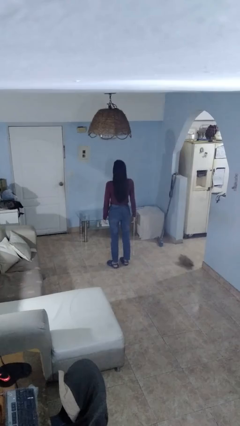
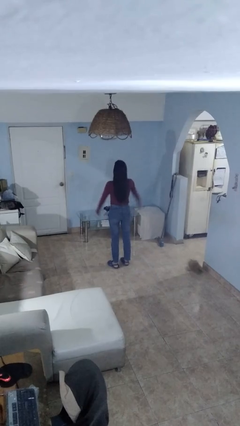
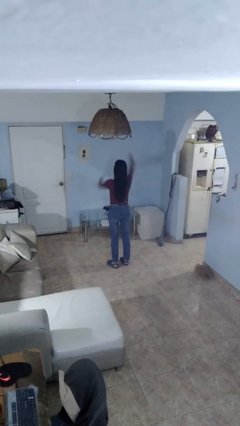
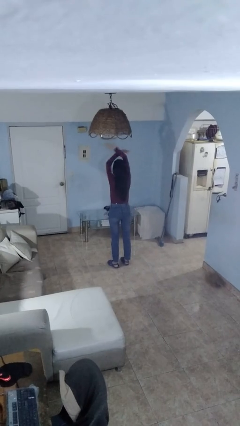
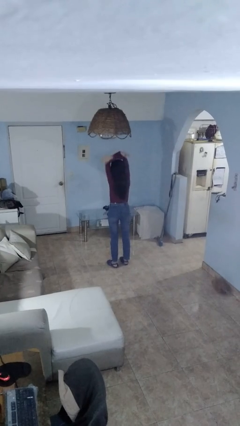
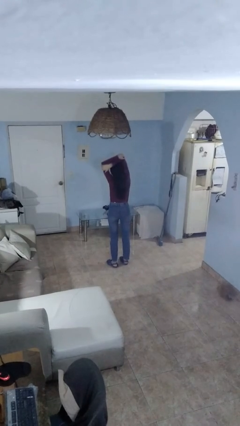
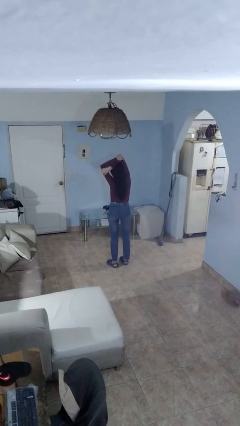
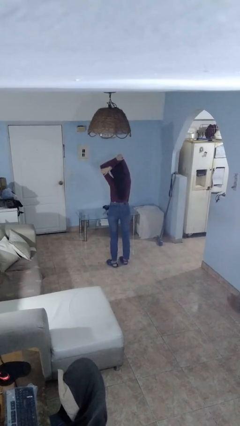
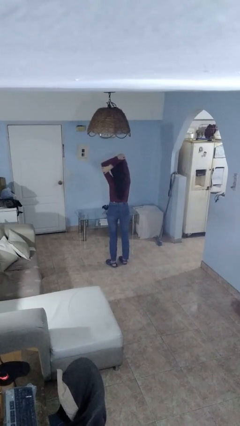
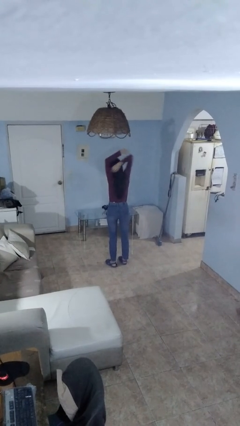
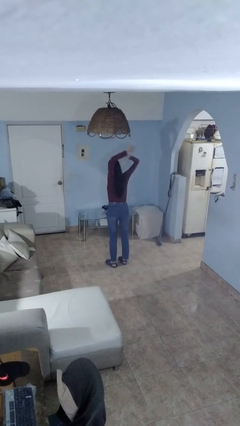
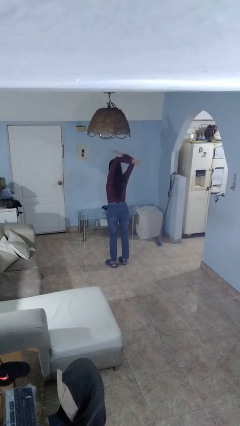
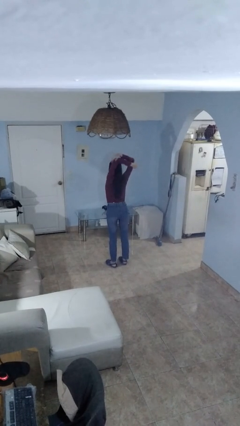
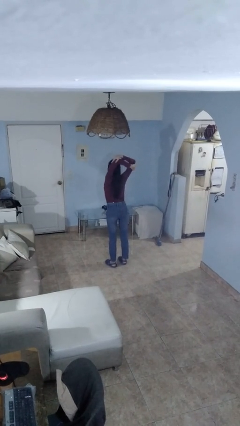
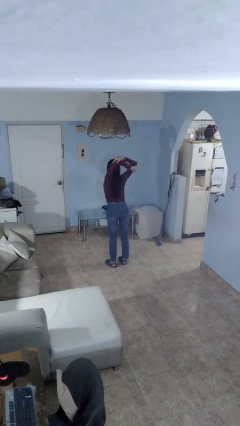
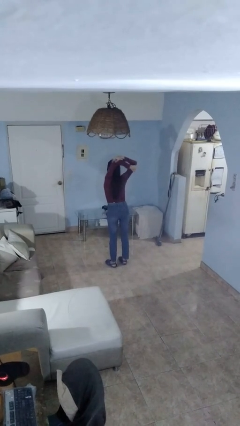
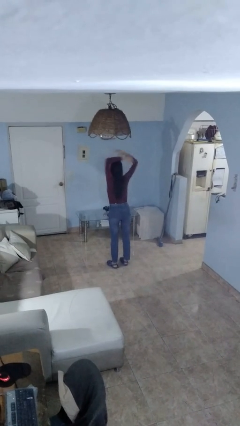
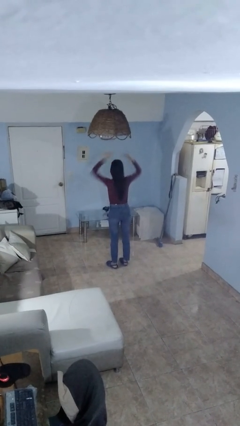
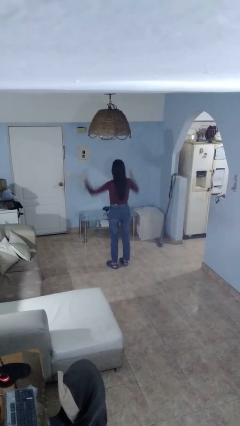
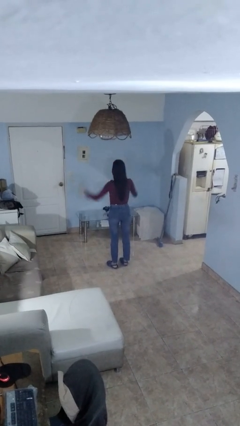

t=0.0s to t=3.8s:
person stretches arms over head

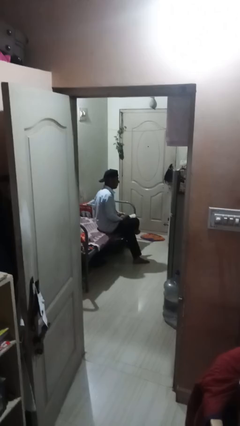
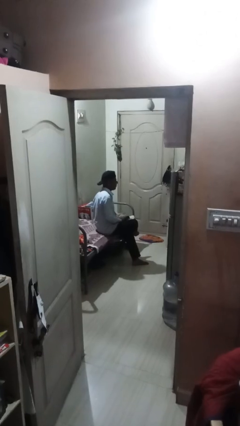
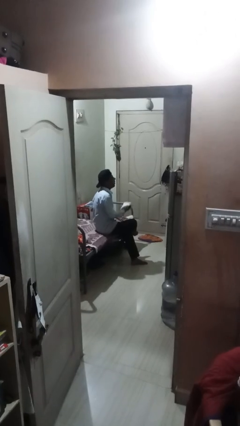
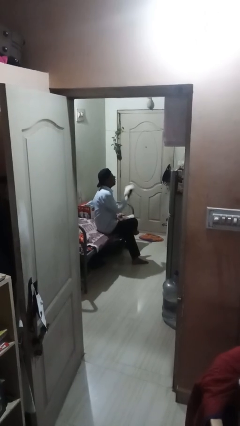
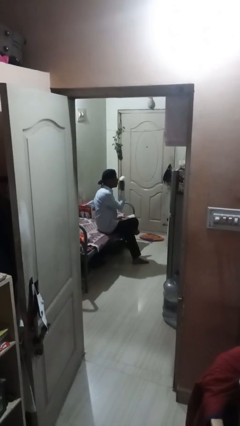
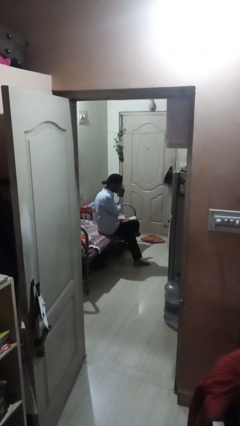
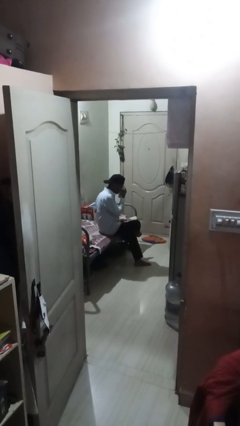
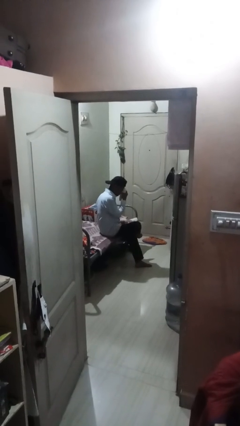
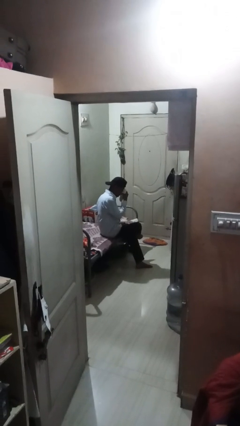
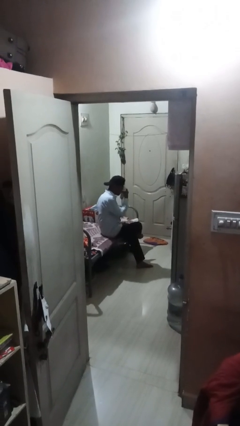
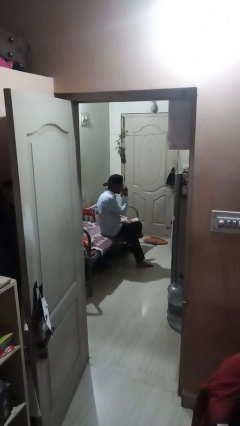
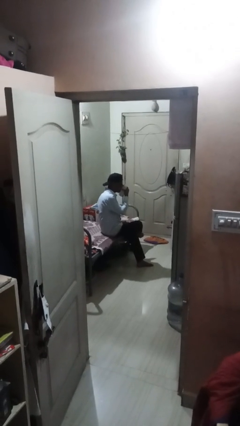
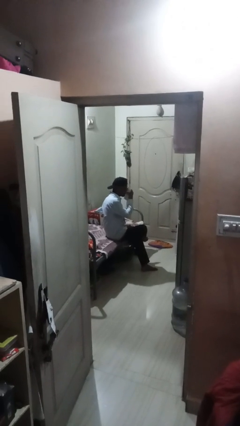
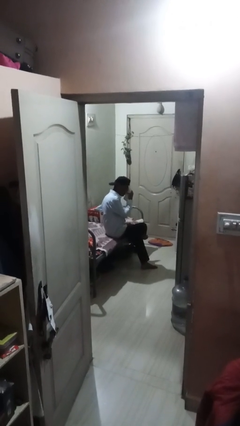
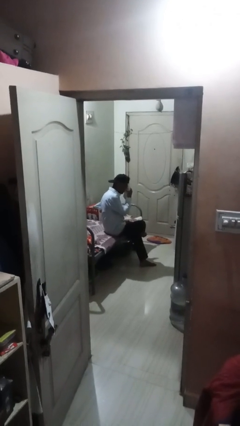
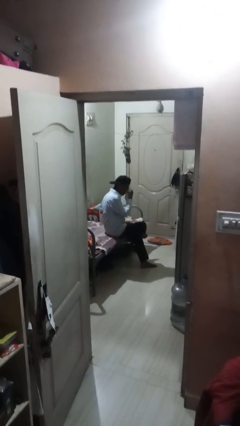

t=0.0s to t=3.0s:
person blows nose

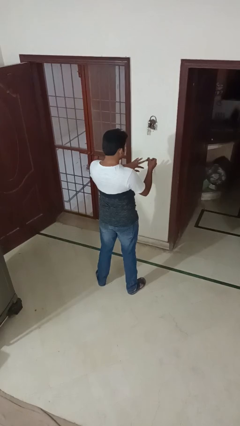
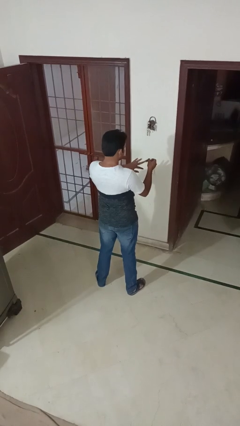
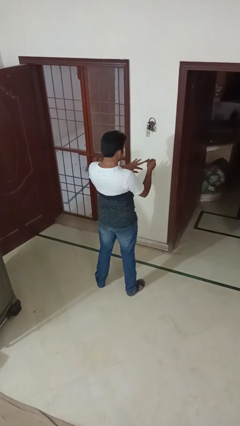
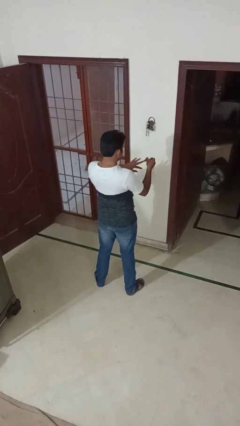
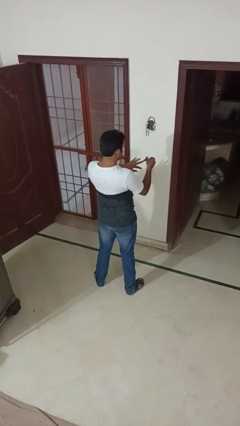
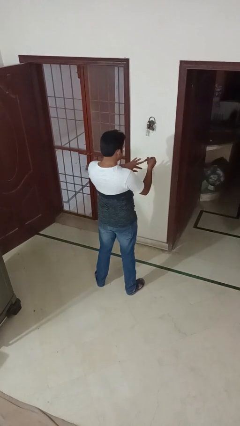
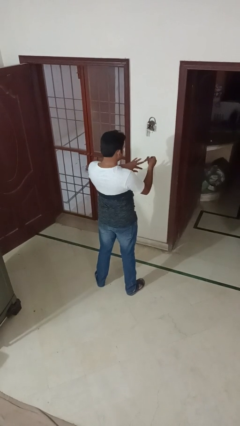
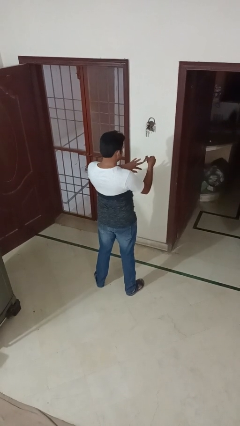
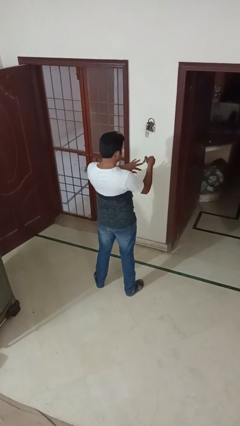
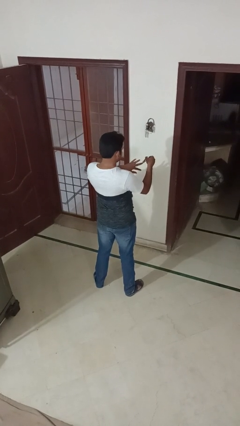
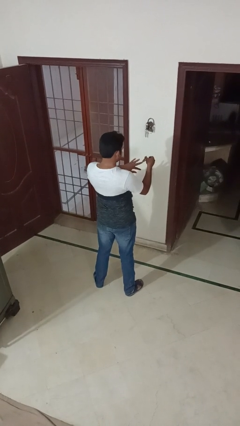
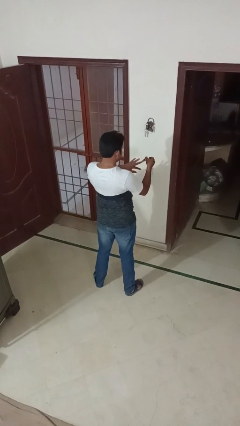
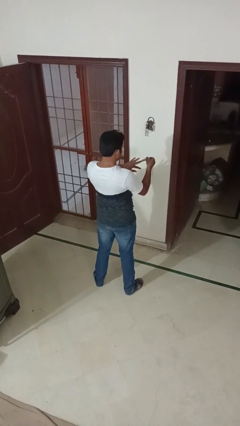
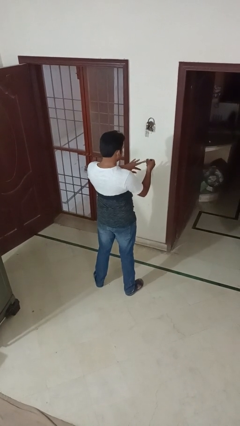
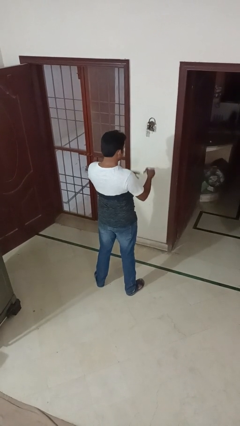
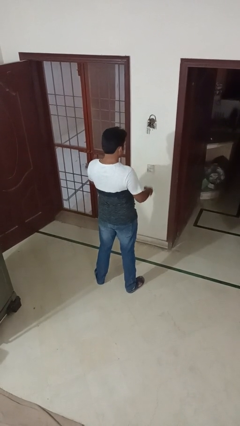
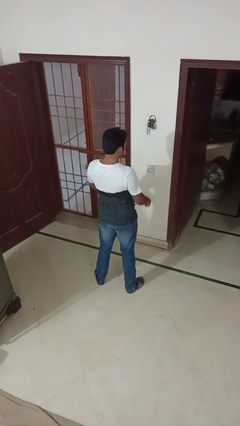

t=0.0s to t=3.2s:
person clips fingernails

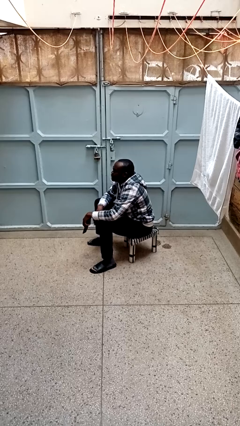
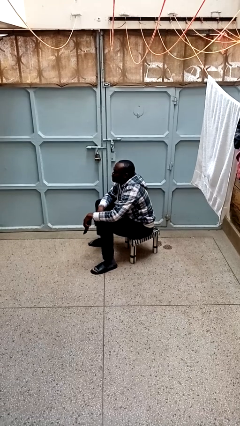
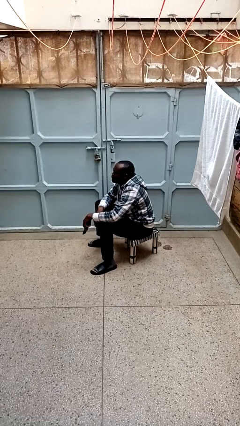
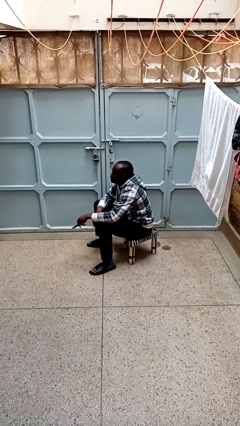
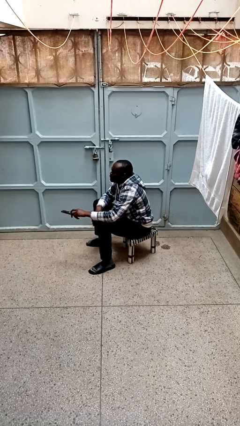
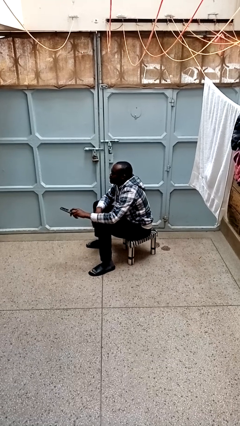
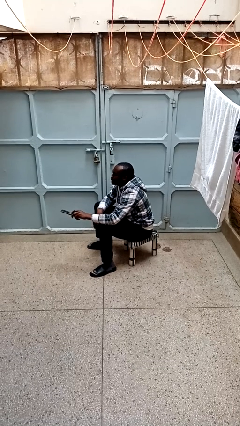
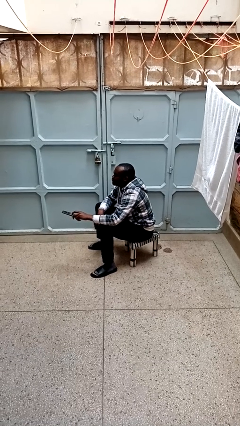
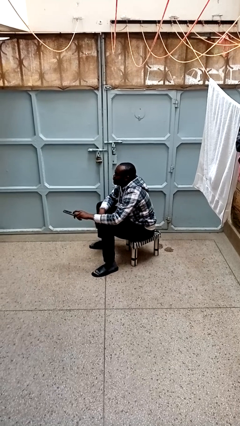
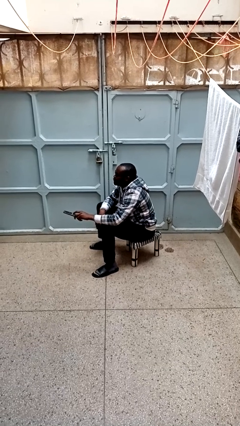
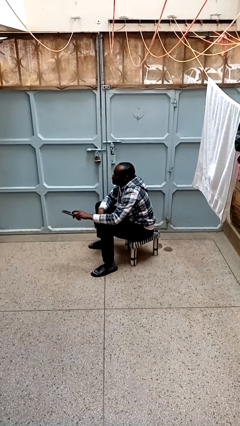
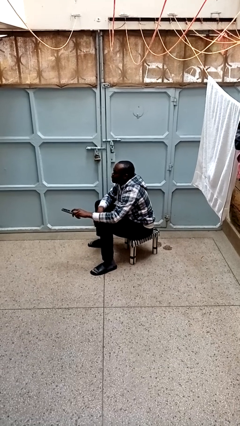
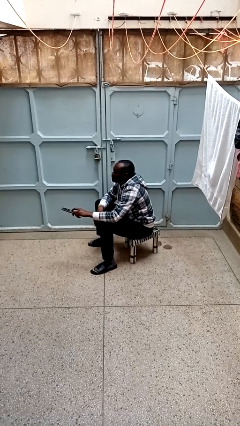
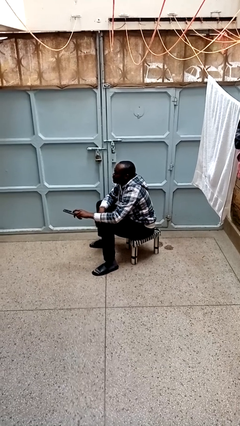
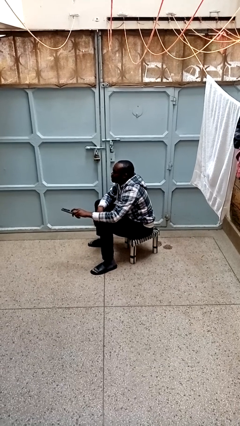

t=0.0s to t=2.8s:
person uses television remote

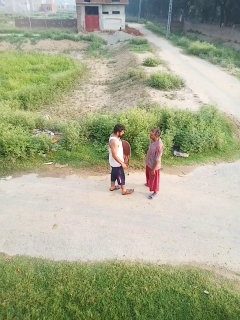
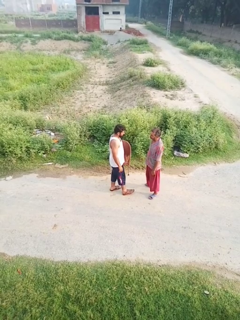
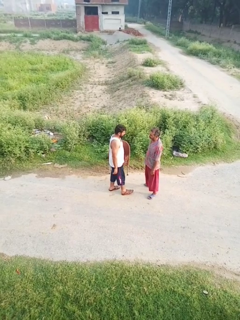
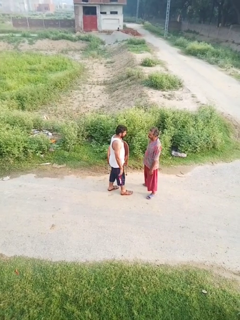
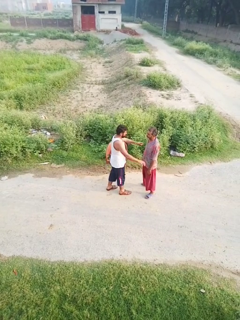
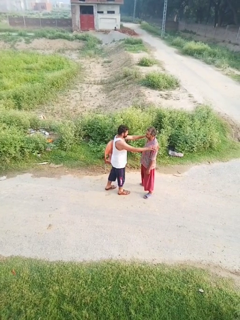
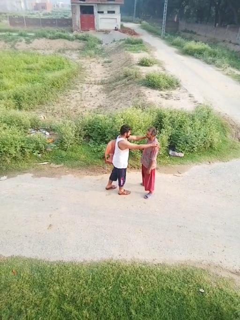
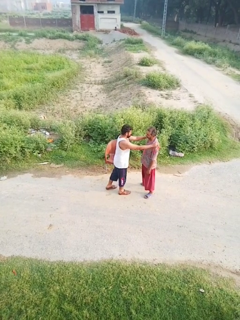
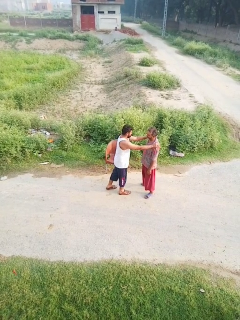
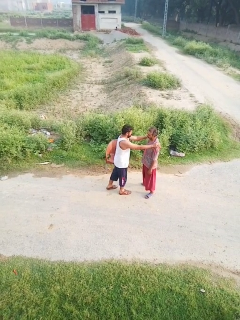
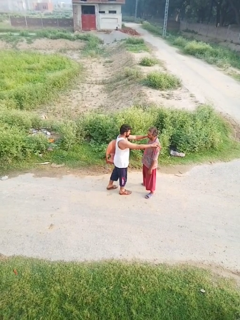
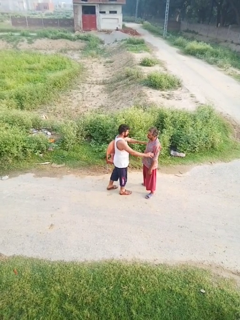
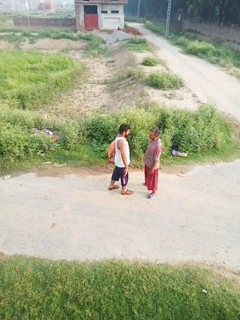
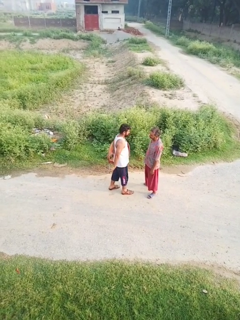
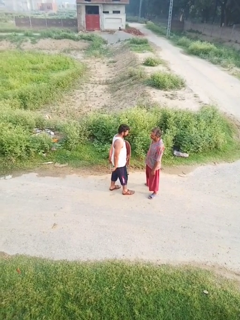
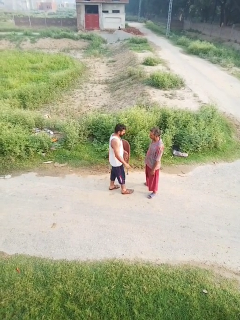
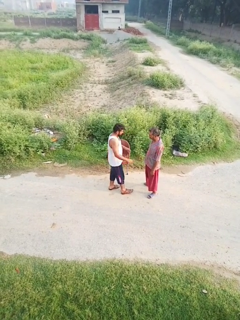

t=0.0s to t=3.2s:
person pounds shoulders of person

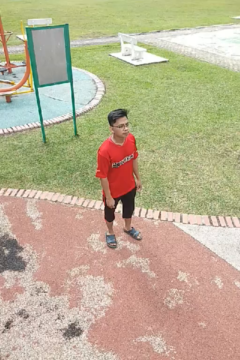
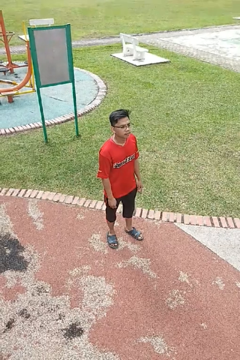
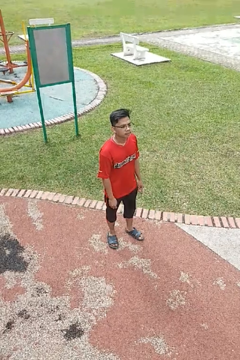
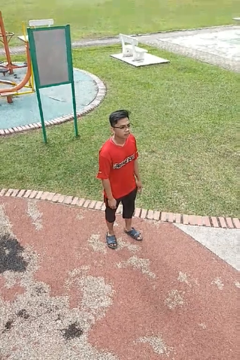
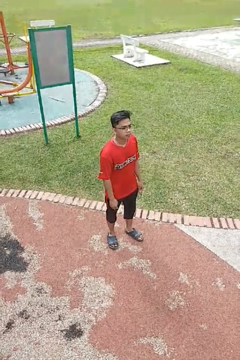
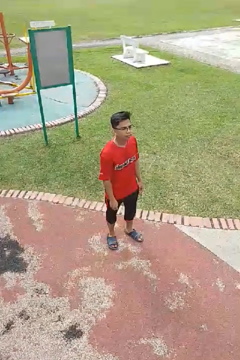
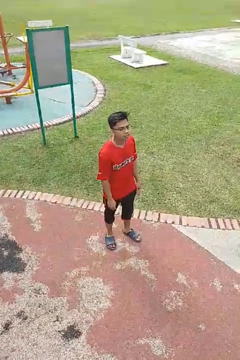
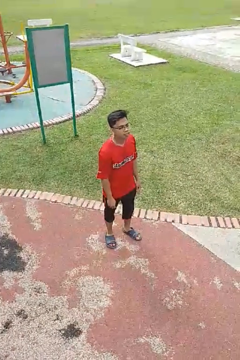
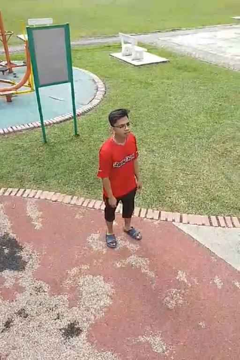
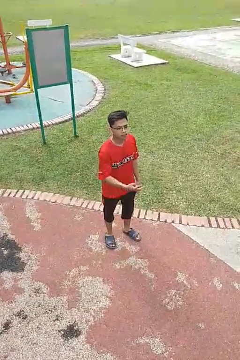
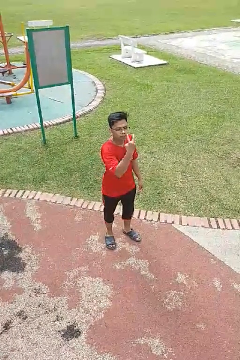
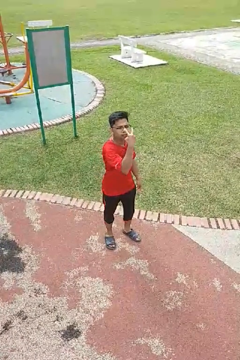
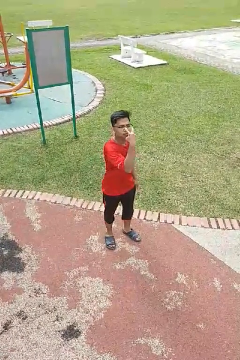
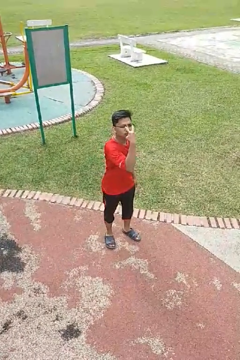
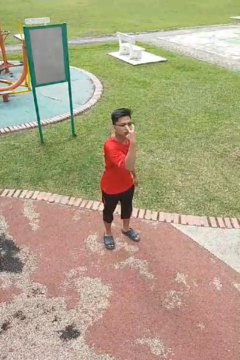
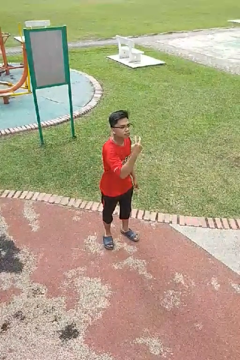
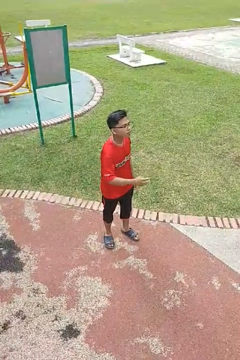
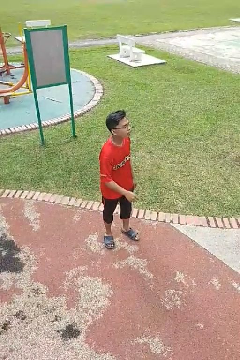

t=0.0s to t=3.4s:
person gestures watch closely
